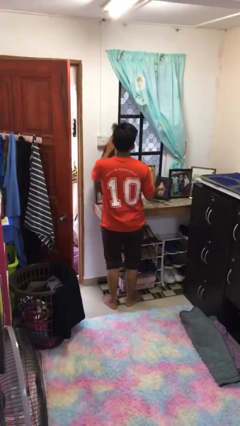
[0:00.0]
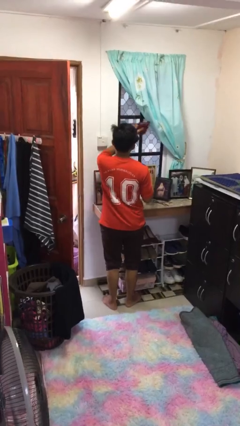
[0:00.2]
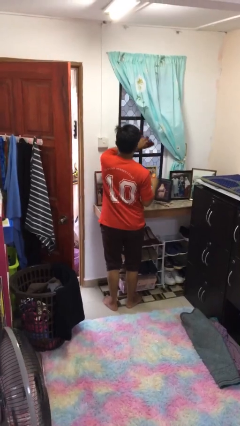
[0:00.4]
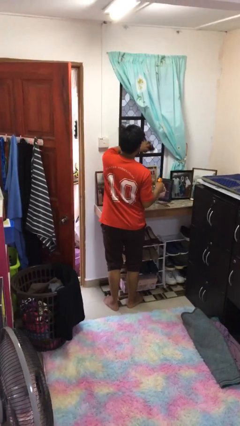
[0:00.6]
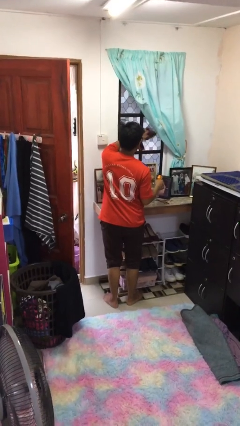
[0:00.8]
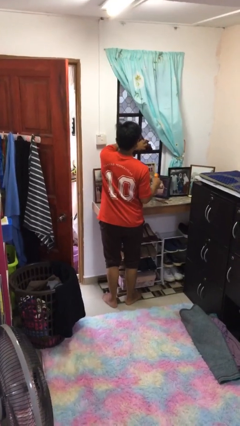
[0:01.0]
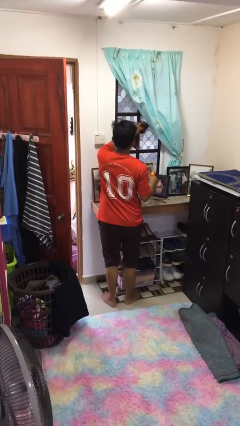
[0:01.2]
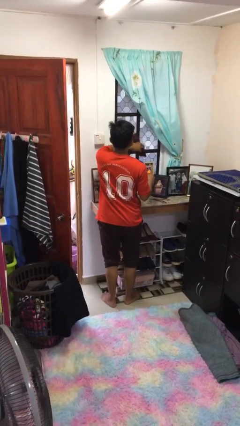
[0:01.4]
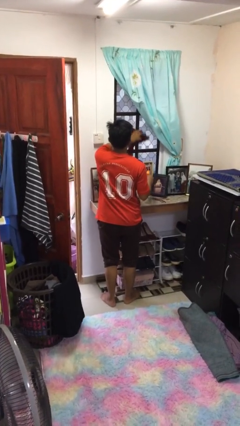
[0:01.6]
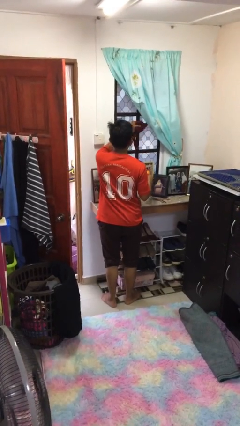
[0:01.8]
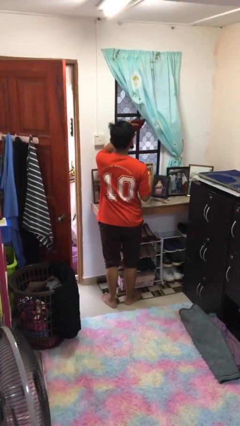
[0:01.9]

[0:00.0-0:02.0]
person washes window

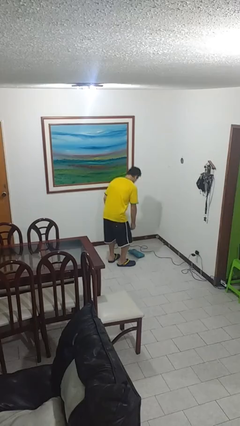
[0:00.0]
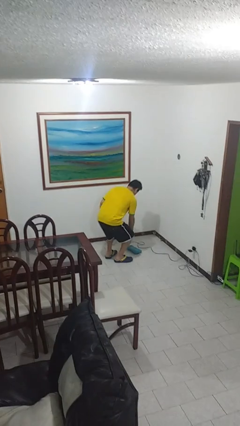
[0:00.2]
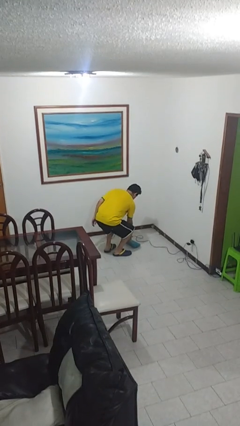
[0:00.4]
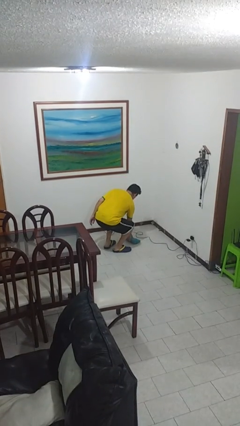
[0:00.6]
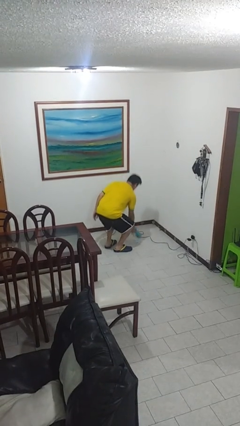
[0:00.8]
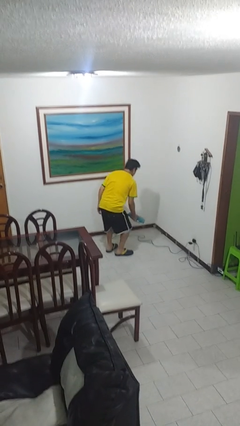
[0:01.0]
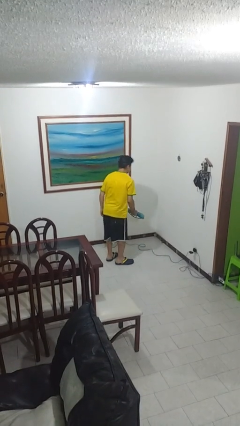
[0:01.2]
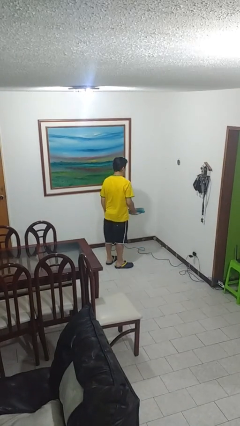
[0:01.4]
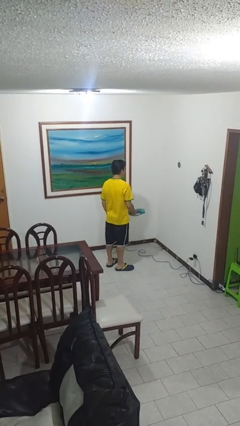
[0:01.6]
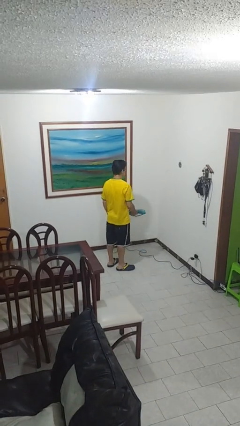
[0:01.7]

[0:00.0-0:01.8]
person picks up object from floor

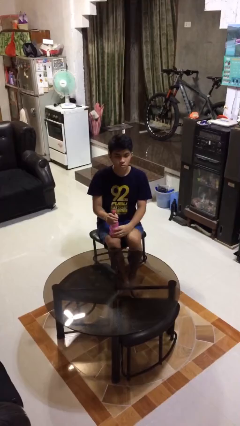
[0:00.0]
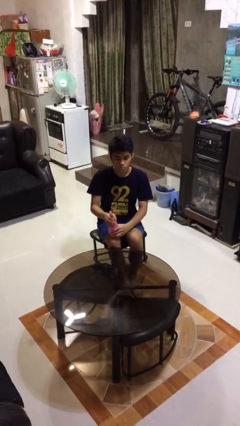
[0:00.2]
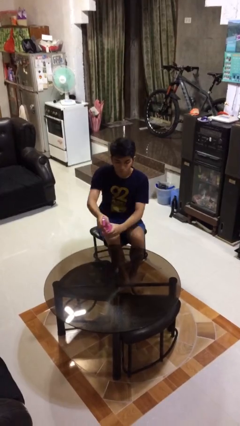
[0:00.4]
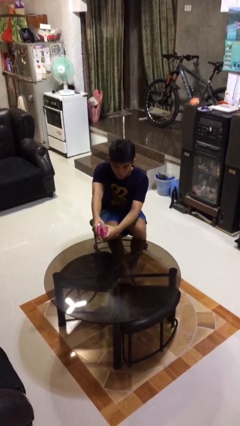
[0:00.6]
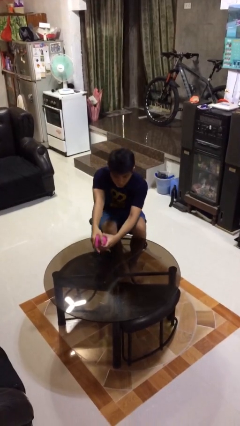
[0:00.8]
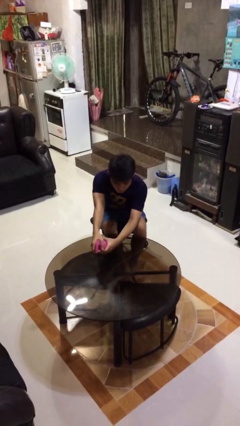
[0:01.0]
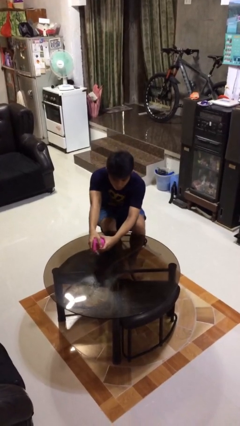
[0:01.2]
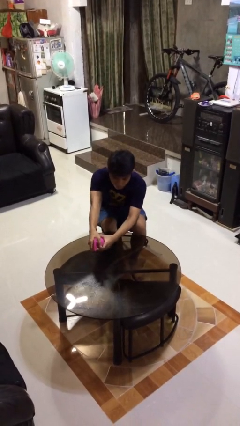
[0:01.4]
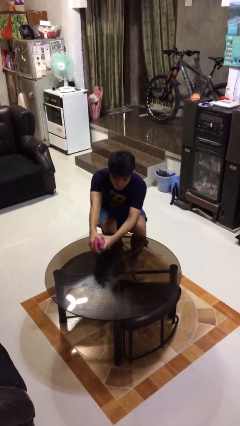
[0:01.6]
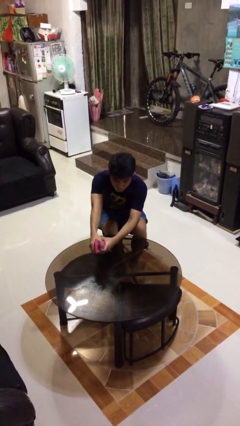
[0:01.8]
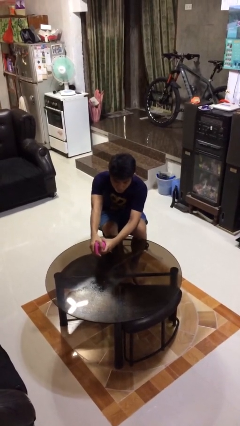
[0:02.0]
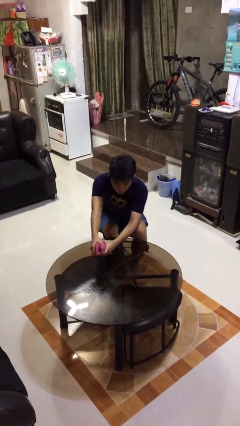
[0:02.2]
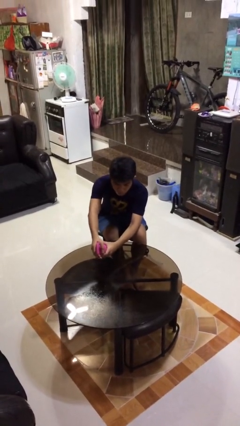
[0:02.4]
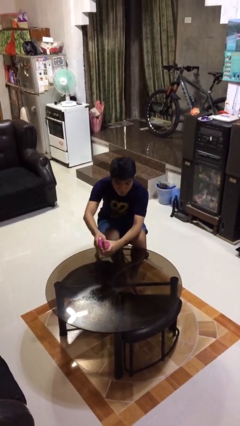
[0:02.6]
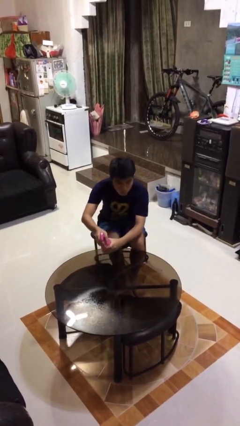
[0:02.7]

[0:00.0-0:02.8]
person sprays from bottle

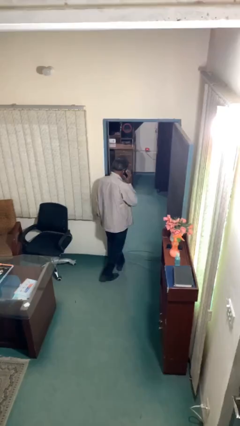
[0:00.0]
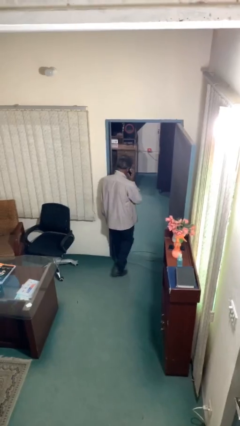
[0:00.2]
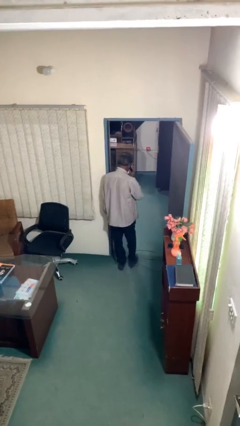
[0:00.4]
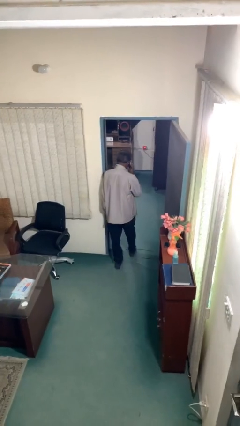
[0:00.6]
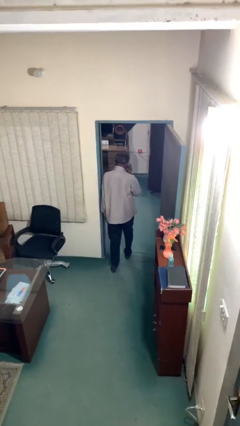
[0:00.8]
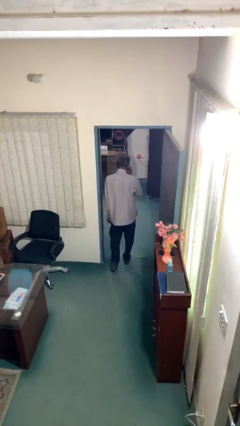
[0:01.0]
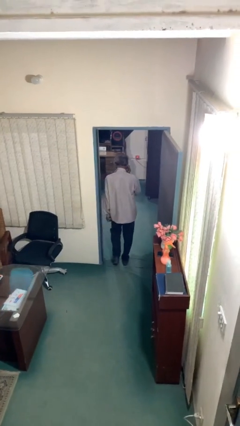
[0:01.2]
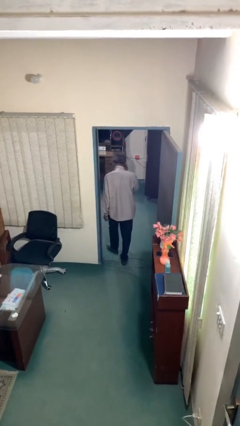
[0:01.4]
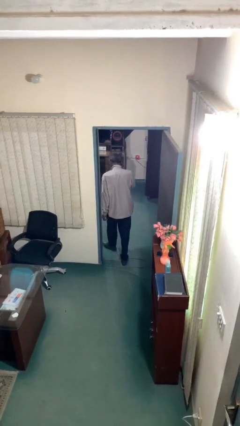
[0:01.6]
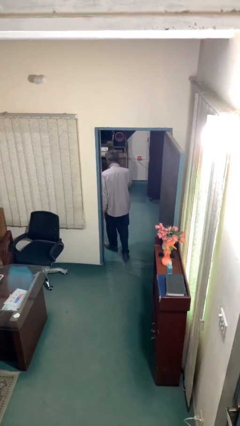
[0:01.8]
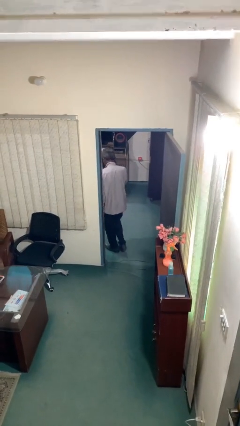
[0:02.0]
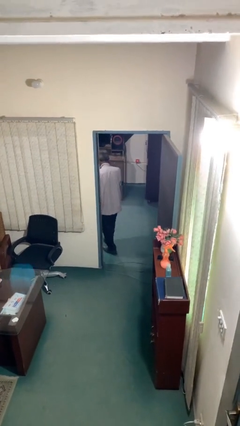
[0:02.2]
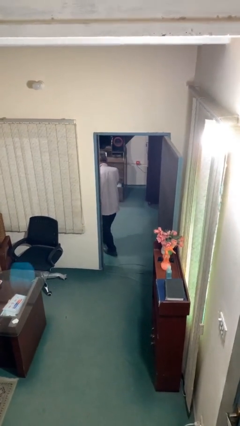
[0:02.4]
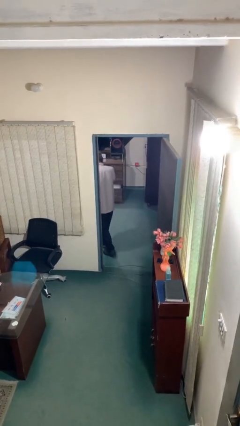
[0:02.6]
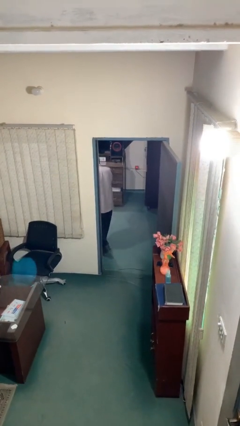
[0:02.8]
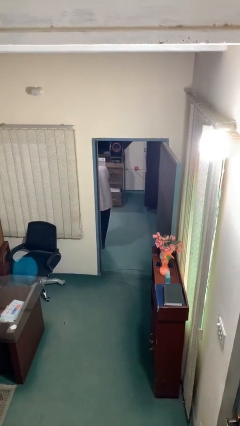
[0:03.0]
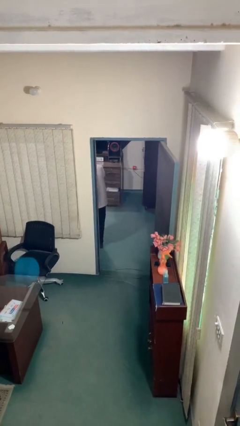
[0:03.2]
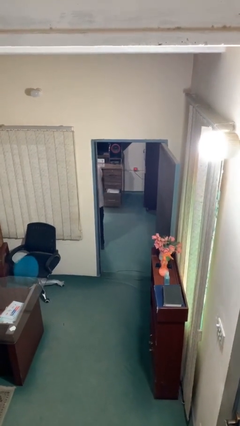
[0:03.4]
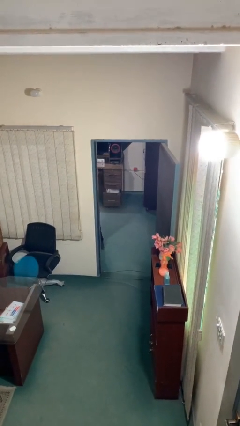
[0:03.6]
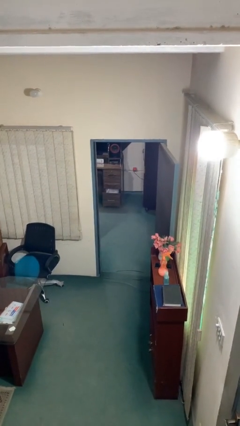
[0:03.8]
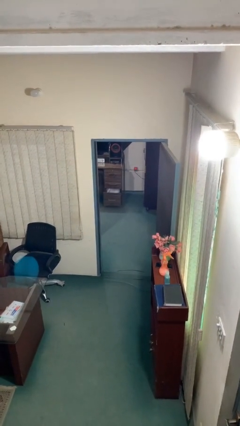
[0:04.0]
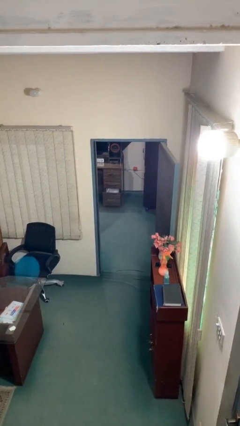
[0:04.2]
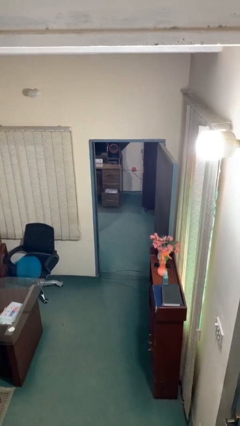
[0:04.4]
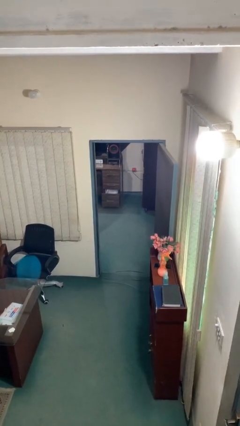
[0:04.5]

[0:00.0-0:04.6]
person exits scene through structure

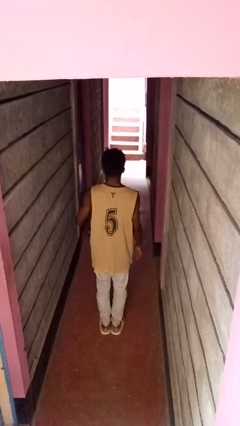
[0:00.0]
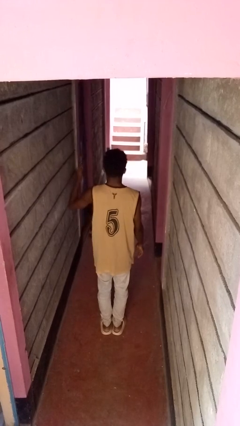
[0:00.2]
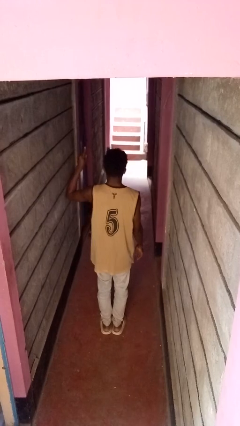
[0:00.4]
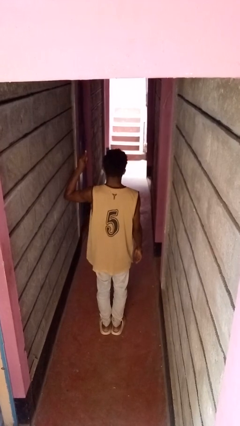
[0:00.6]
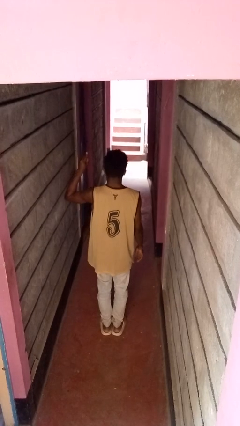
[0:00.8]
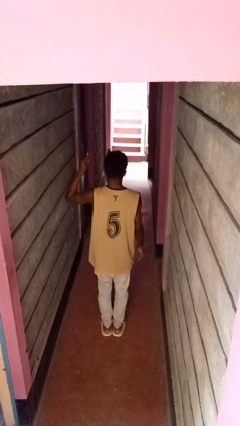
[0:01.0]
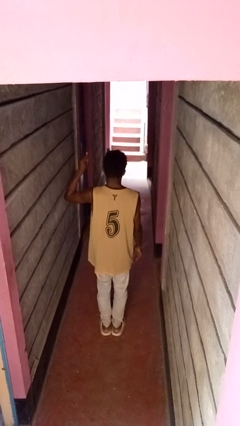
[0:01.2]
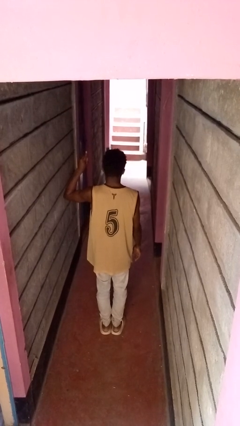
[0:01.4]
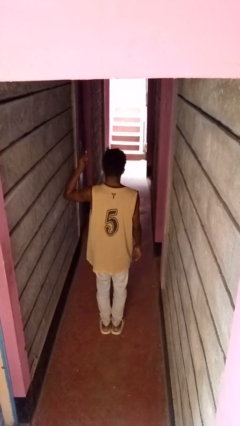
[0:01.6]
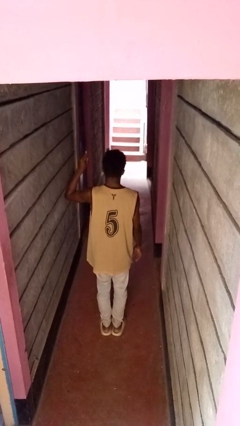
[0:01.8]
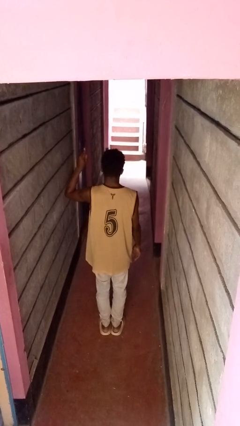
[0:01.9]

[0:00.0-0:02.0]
person gestures number one

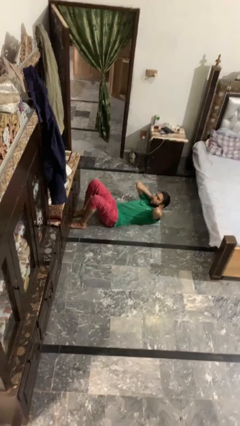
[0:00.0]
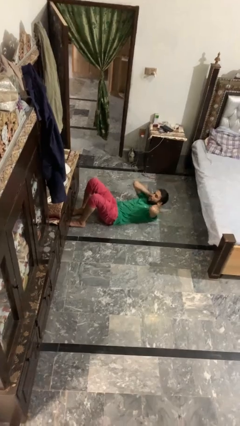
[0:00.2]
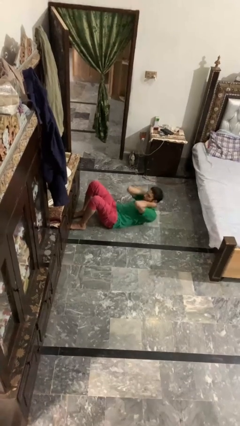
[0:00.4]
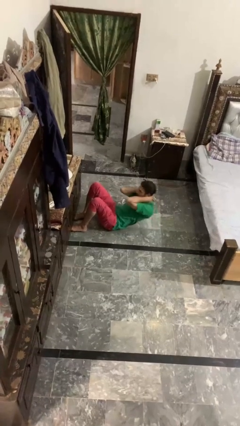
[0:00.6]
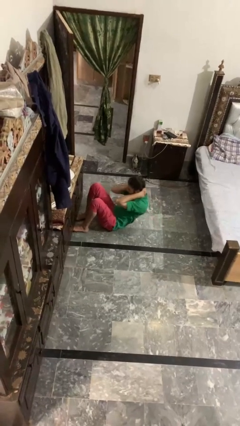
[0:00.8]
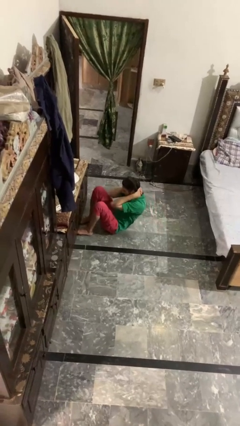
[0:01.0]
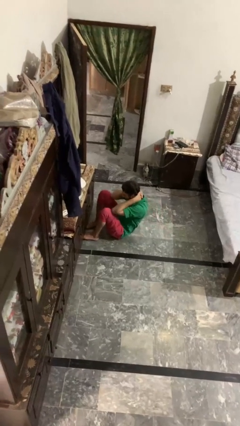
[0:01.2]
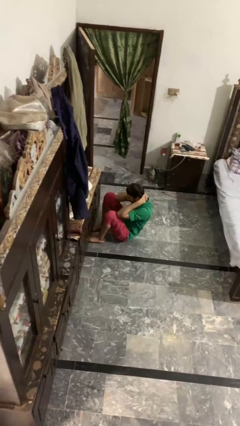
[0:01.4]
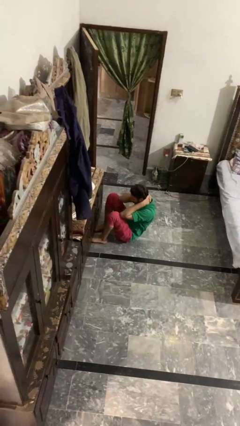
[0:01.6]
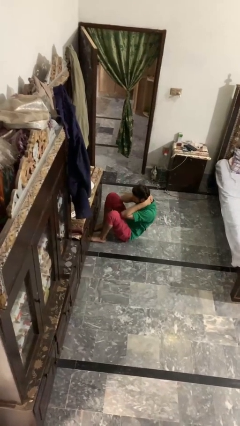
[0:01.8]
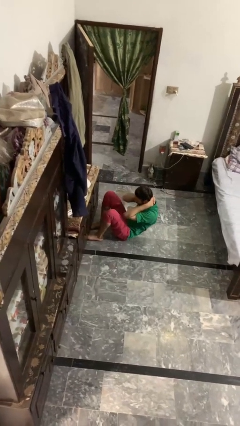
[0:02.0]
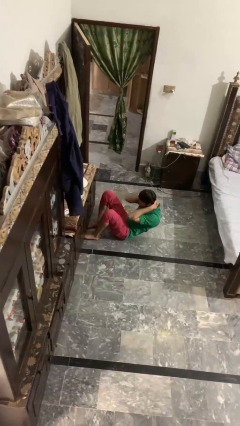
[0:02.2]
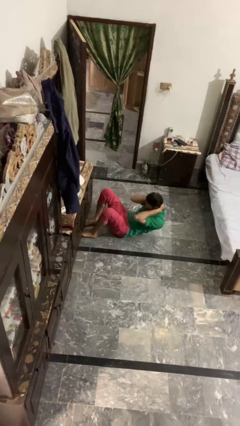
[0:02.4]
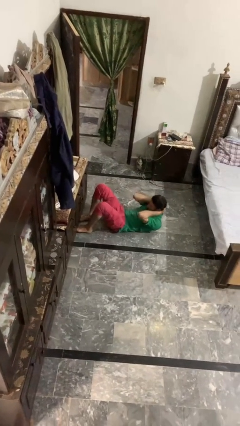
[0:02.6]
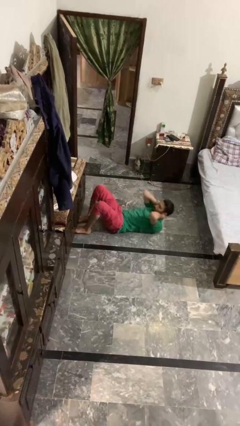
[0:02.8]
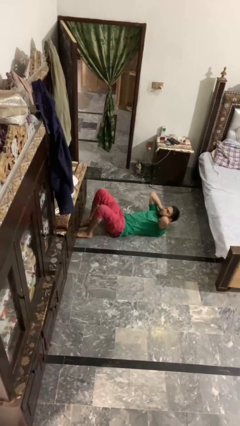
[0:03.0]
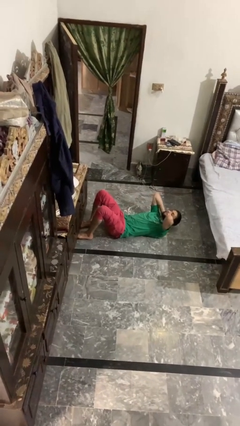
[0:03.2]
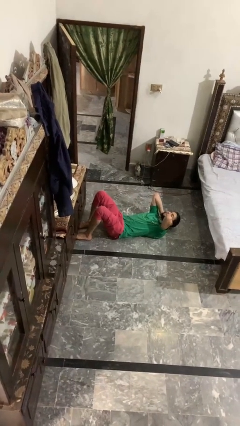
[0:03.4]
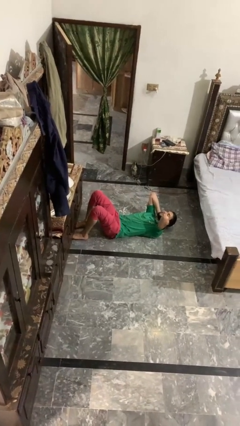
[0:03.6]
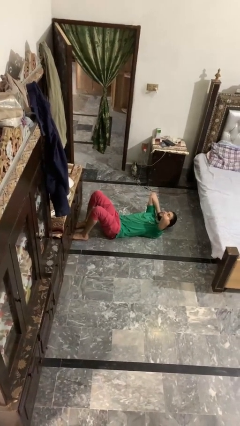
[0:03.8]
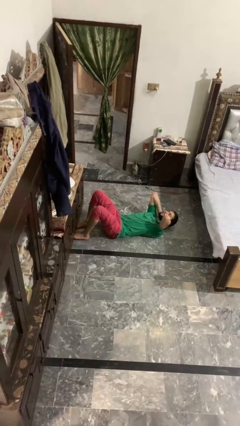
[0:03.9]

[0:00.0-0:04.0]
person exercises with situp

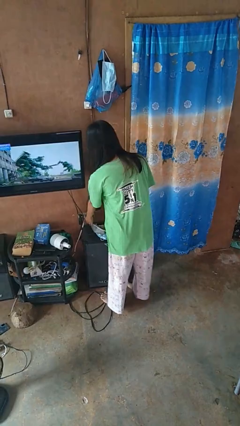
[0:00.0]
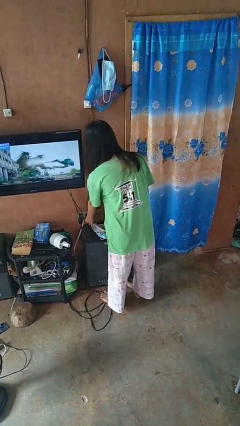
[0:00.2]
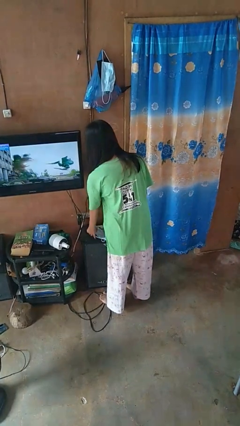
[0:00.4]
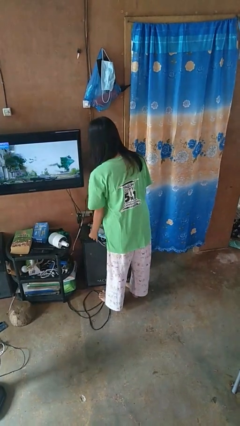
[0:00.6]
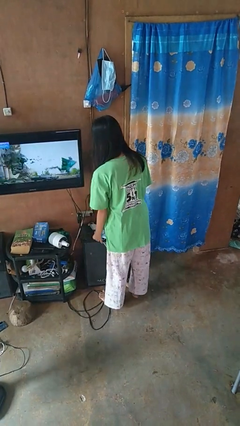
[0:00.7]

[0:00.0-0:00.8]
person unplugs from electrical socket
